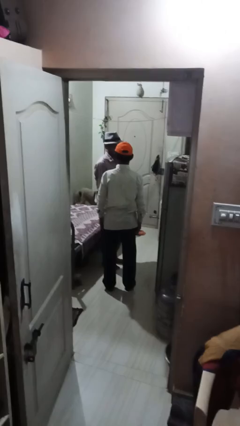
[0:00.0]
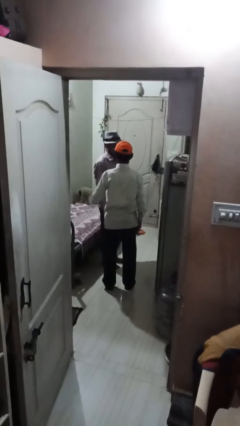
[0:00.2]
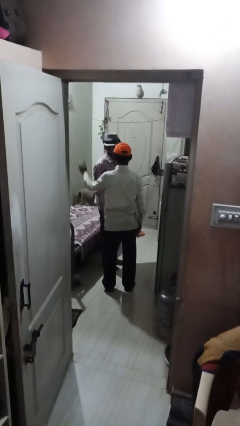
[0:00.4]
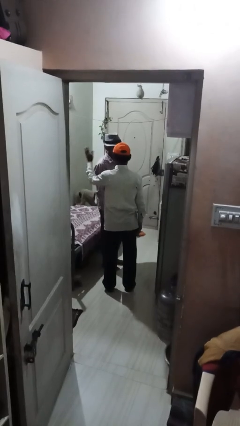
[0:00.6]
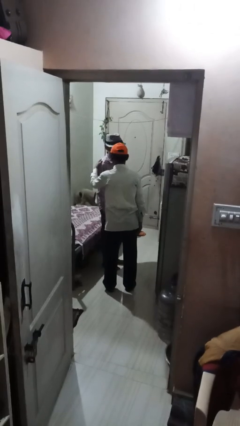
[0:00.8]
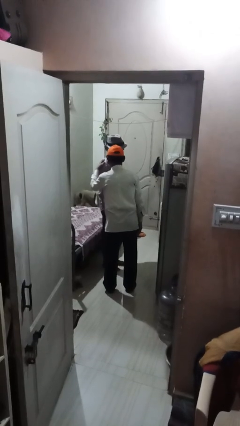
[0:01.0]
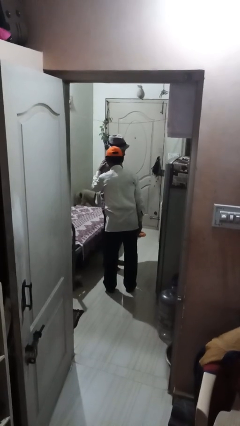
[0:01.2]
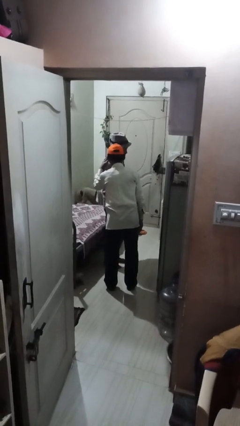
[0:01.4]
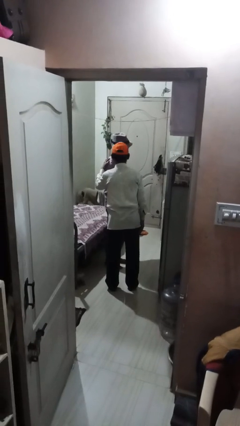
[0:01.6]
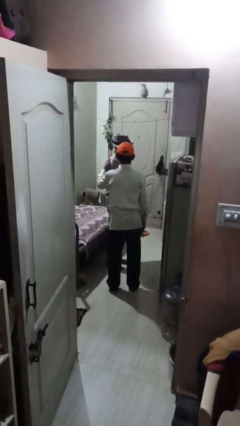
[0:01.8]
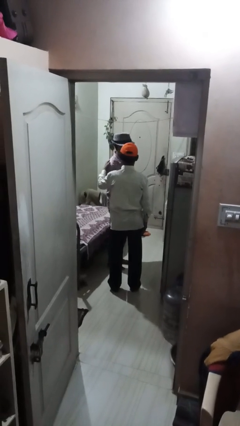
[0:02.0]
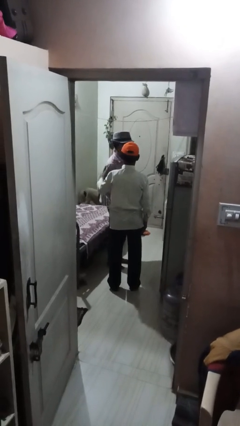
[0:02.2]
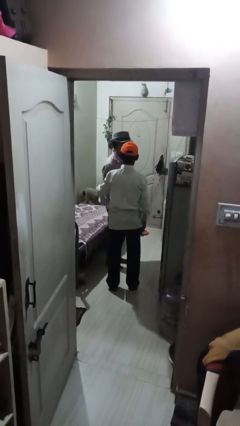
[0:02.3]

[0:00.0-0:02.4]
person pounds shoulders of person

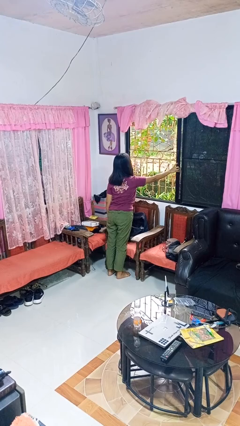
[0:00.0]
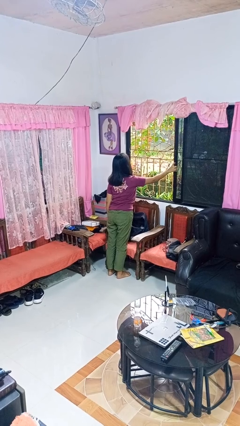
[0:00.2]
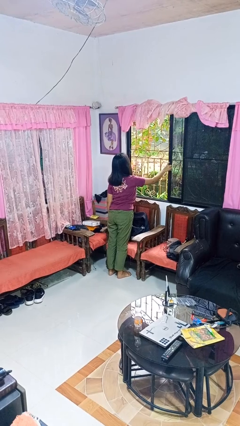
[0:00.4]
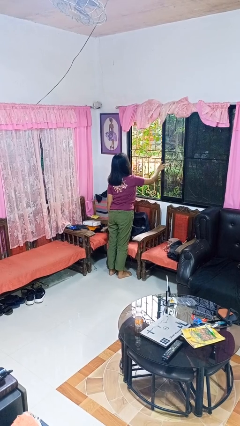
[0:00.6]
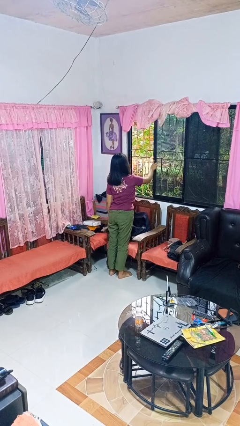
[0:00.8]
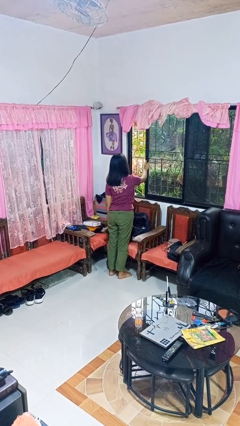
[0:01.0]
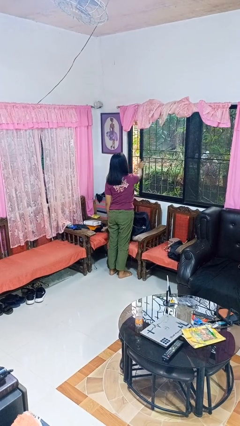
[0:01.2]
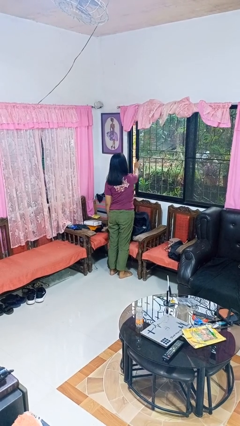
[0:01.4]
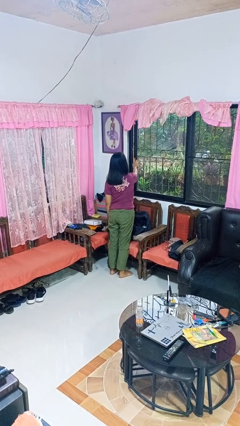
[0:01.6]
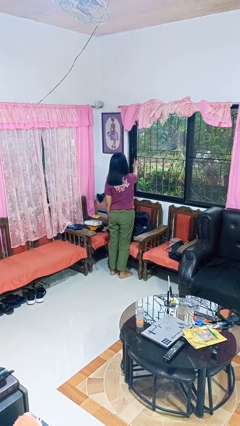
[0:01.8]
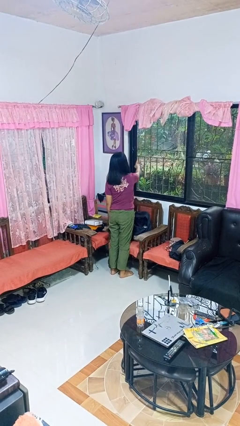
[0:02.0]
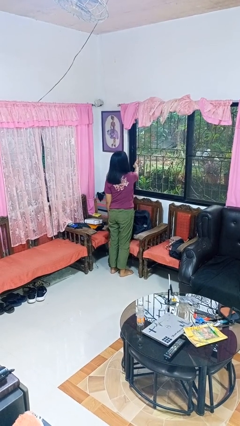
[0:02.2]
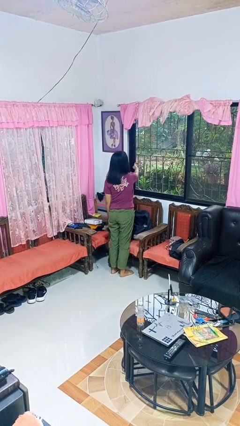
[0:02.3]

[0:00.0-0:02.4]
person closes home window

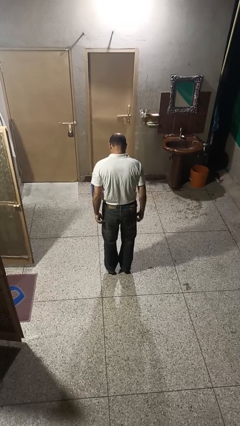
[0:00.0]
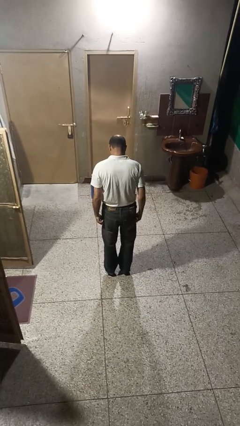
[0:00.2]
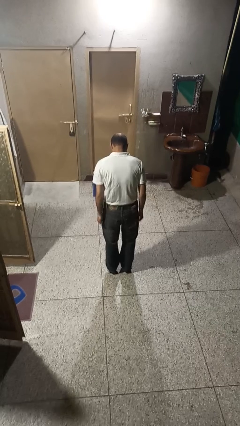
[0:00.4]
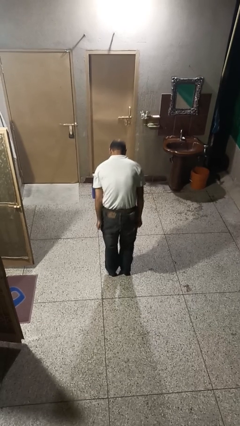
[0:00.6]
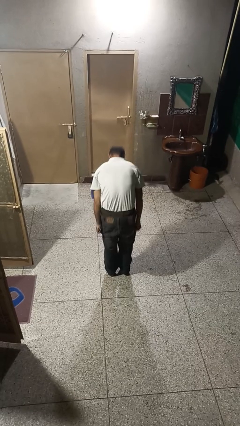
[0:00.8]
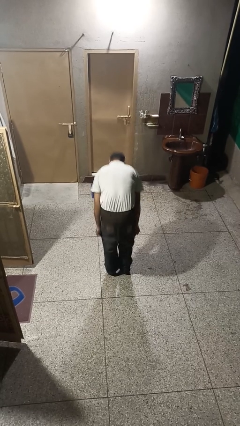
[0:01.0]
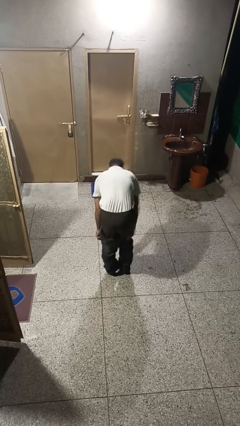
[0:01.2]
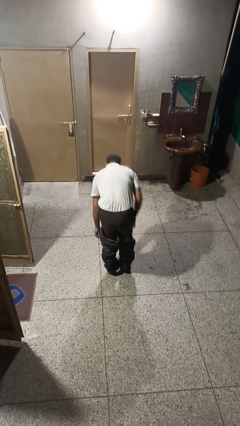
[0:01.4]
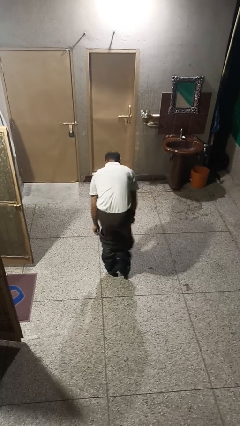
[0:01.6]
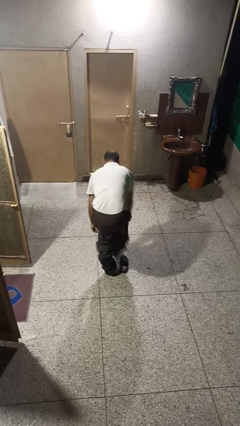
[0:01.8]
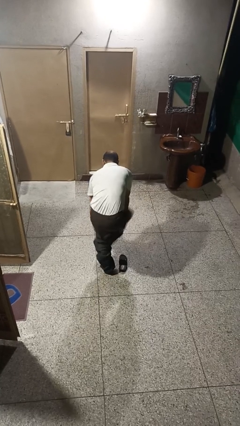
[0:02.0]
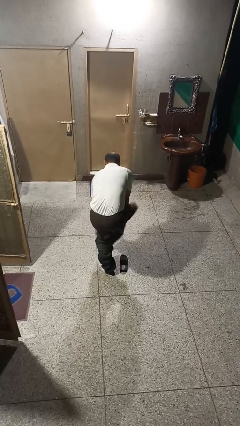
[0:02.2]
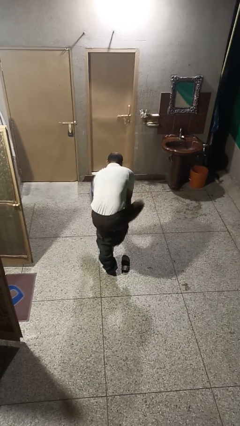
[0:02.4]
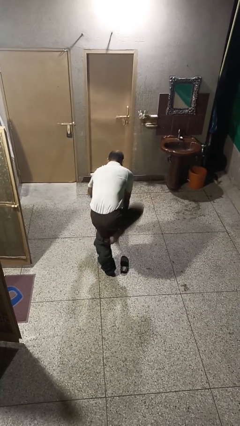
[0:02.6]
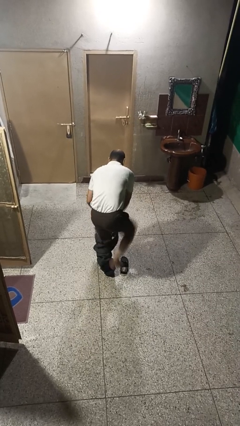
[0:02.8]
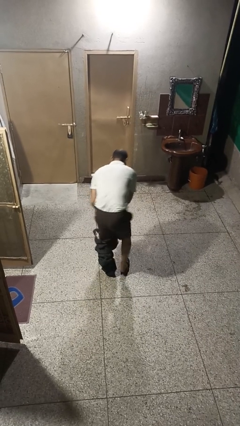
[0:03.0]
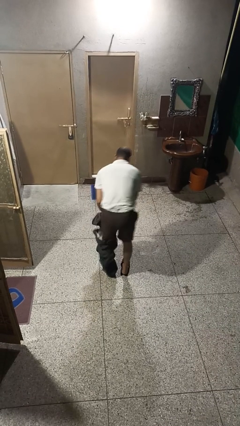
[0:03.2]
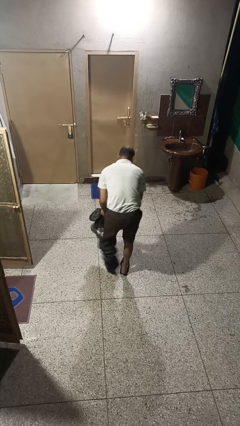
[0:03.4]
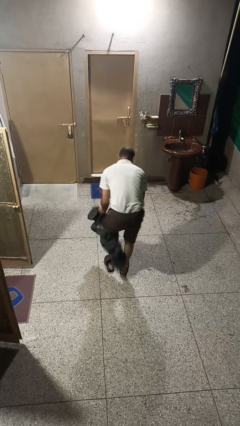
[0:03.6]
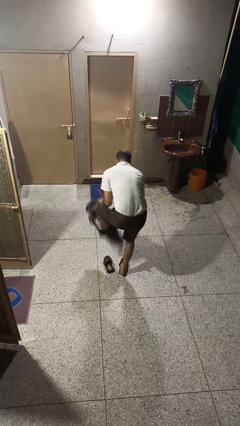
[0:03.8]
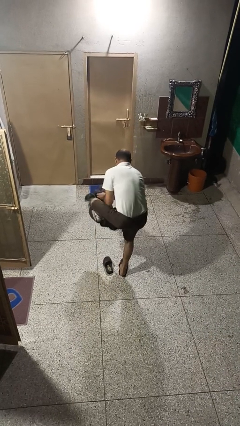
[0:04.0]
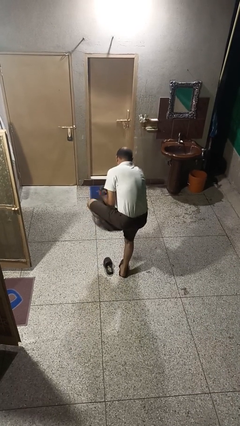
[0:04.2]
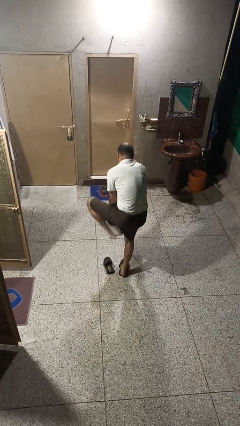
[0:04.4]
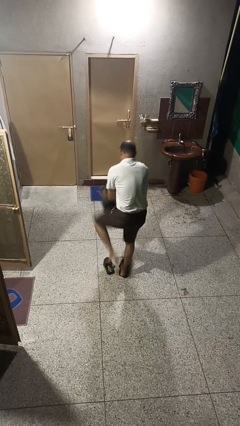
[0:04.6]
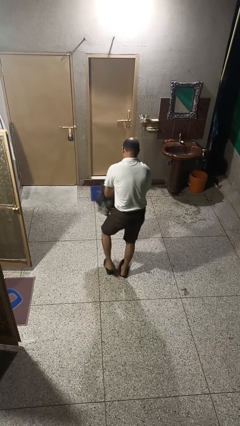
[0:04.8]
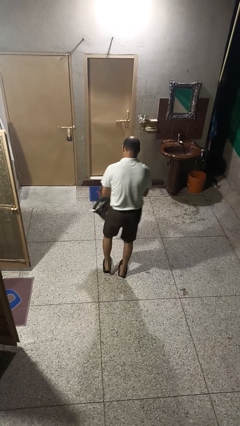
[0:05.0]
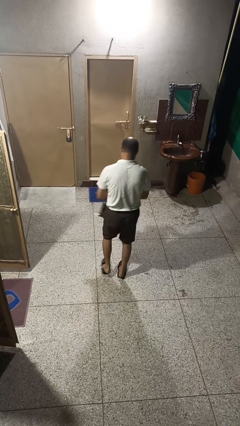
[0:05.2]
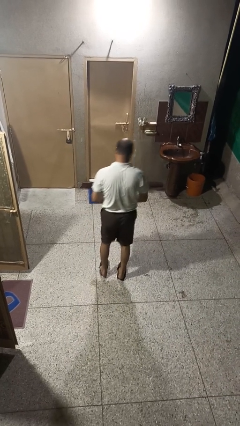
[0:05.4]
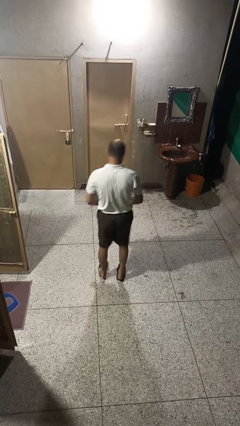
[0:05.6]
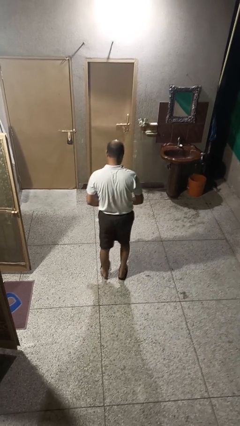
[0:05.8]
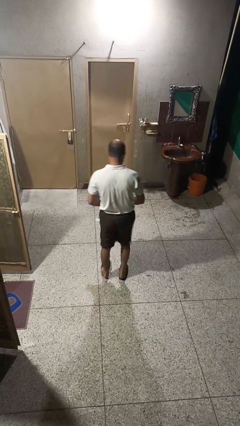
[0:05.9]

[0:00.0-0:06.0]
person takes off pants

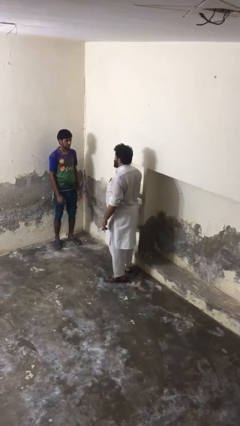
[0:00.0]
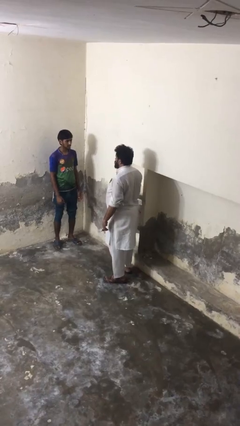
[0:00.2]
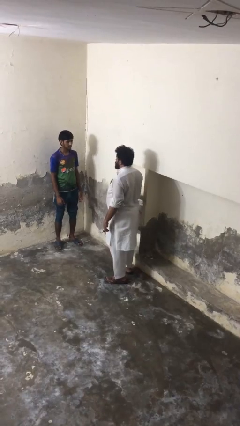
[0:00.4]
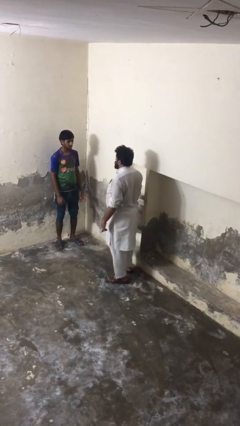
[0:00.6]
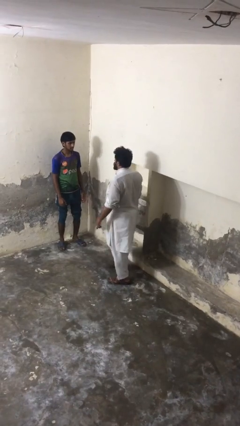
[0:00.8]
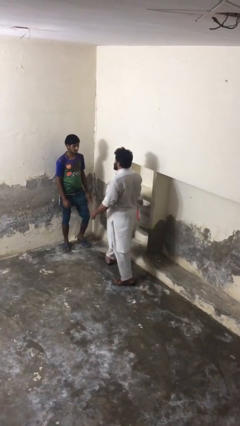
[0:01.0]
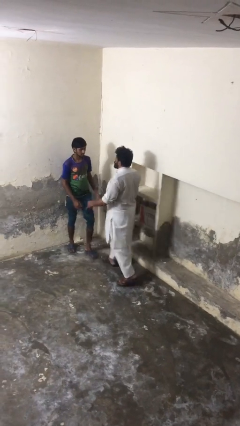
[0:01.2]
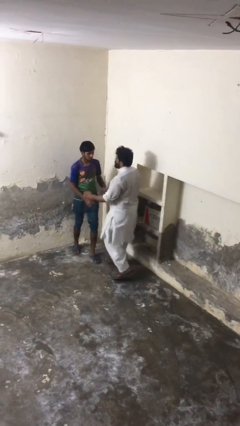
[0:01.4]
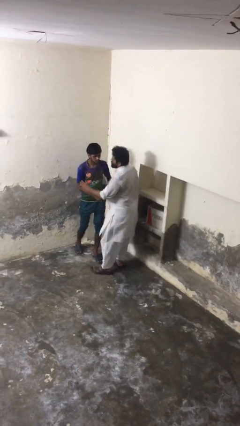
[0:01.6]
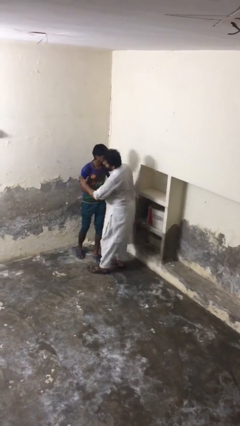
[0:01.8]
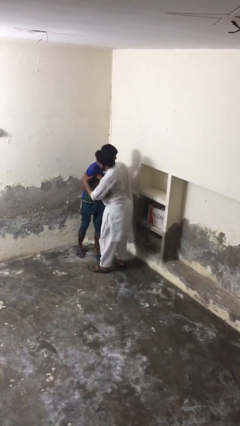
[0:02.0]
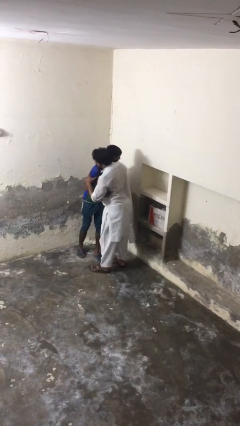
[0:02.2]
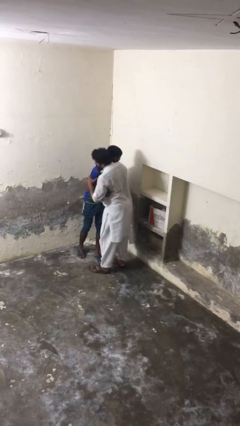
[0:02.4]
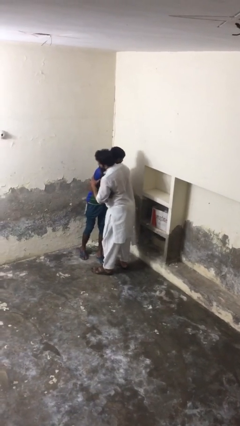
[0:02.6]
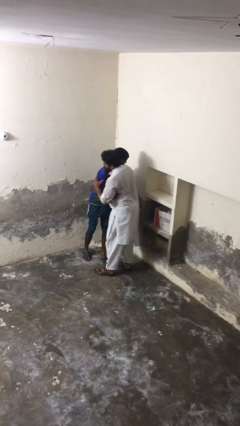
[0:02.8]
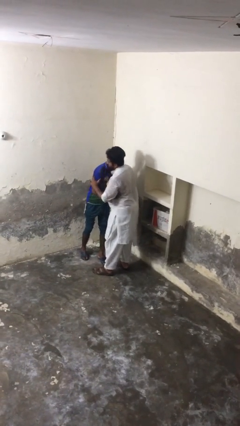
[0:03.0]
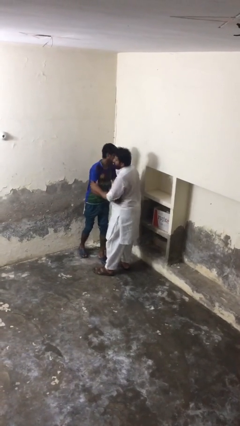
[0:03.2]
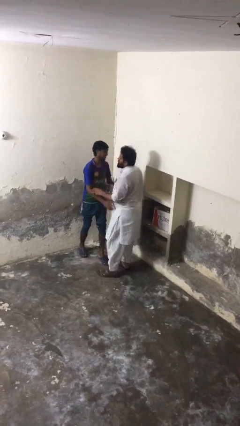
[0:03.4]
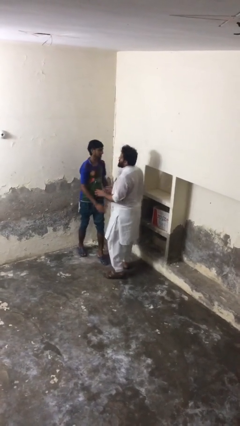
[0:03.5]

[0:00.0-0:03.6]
person embraces person

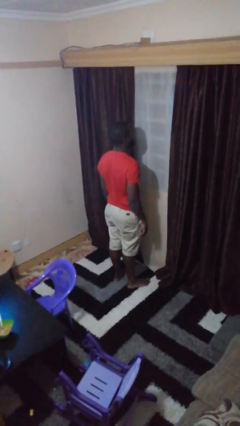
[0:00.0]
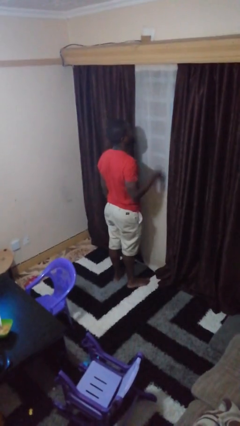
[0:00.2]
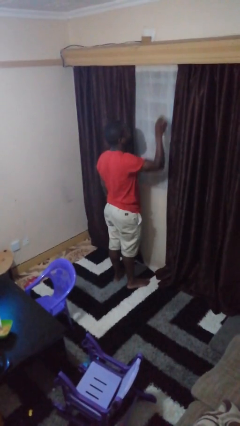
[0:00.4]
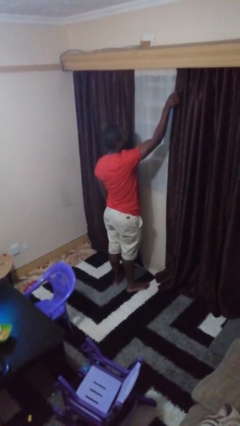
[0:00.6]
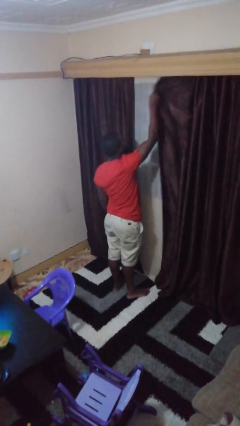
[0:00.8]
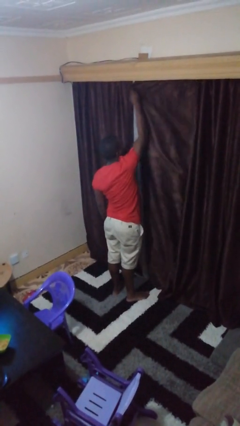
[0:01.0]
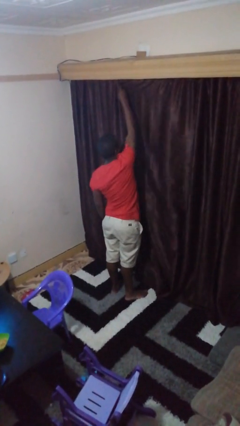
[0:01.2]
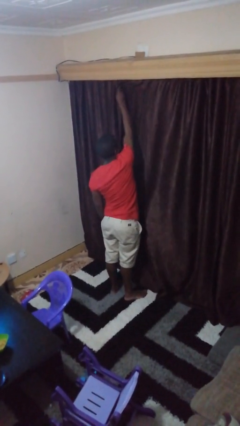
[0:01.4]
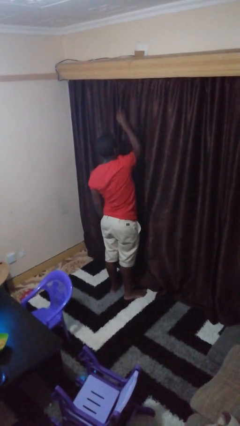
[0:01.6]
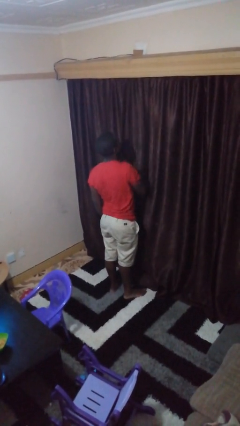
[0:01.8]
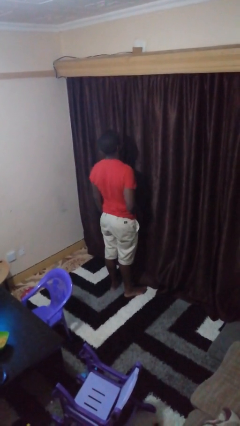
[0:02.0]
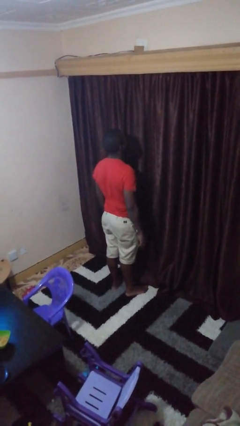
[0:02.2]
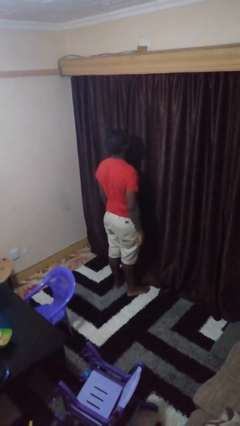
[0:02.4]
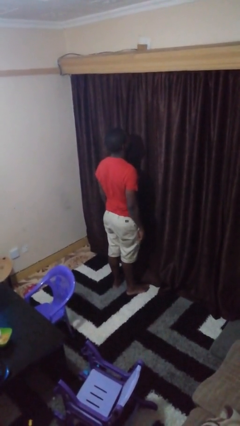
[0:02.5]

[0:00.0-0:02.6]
person closes curtains

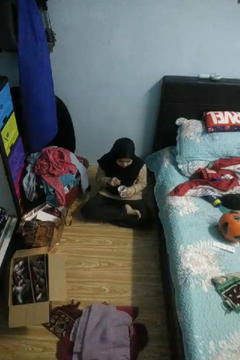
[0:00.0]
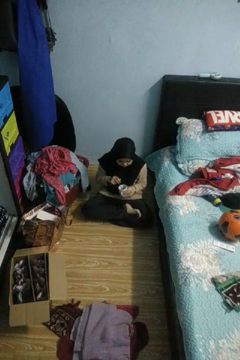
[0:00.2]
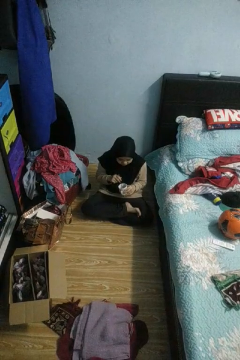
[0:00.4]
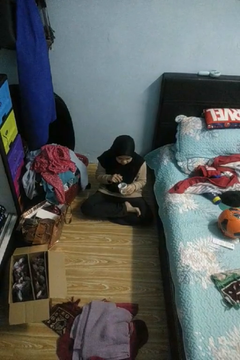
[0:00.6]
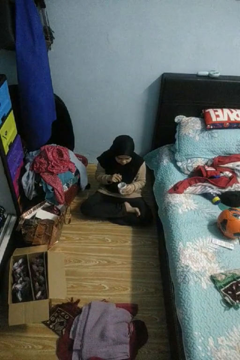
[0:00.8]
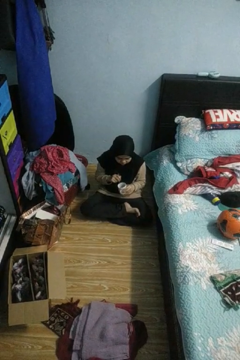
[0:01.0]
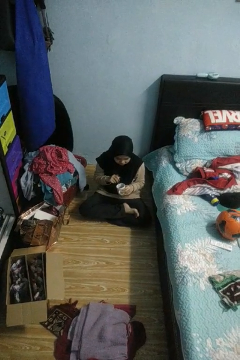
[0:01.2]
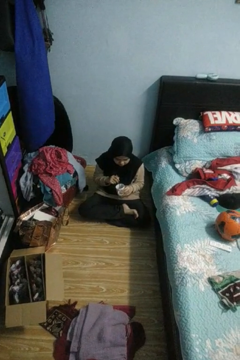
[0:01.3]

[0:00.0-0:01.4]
person stirs mug
